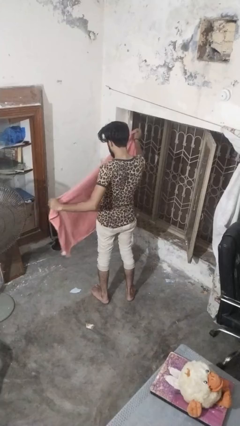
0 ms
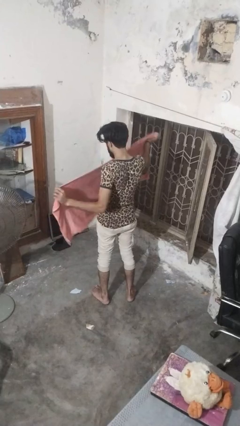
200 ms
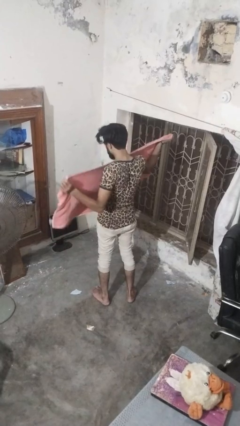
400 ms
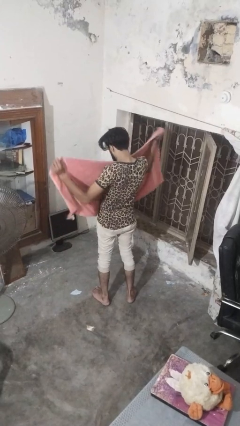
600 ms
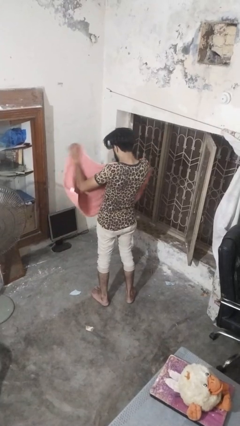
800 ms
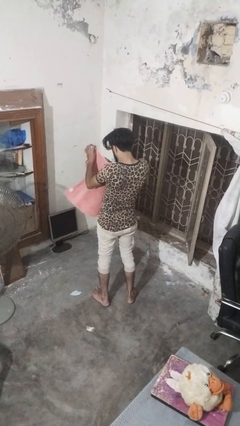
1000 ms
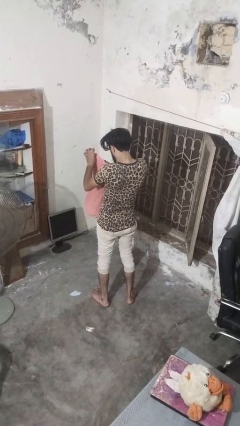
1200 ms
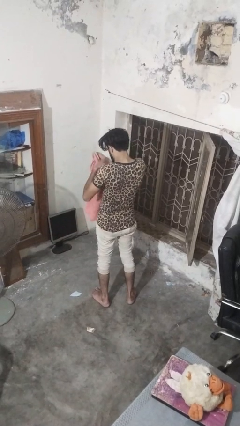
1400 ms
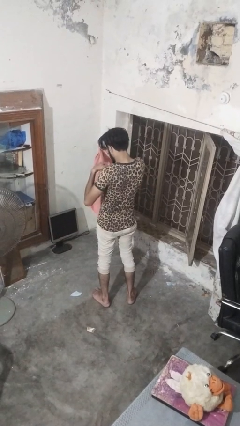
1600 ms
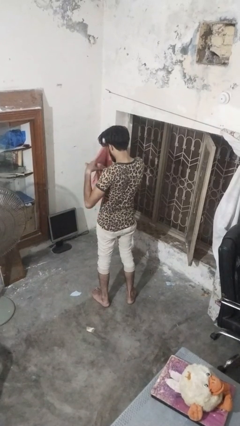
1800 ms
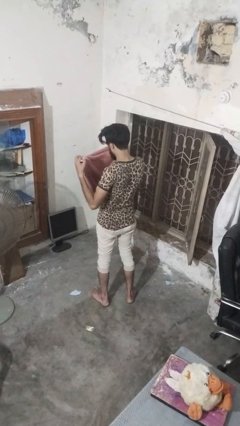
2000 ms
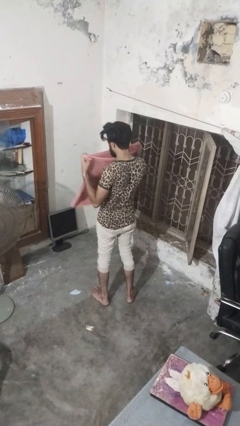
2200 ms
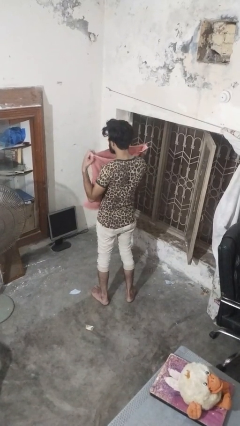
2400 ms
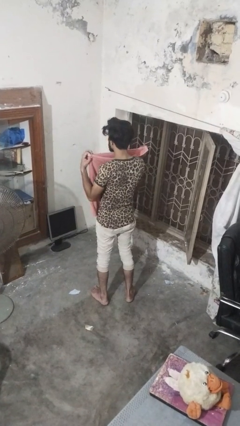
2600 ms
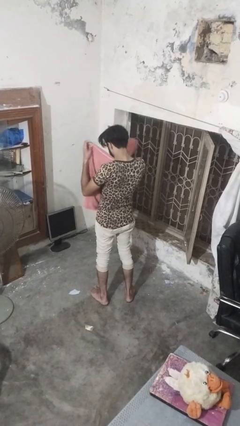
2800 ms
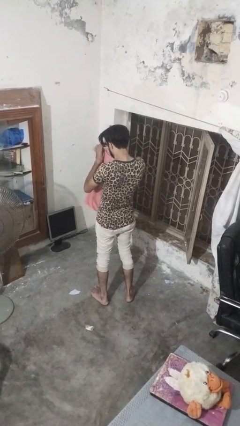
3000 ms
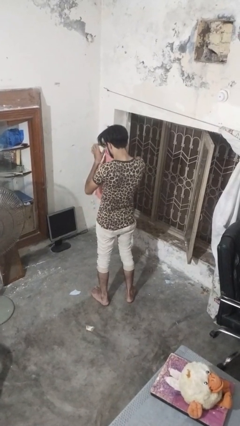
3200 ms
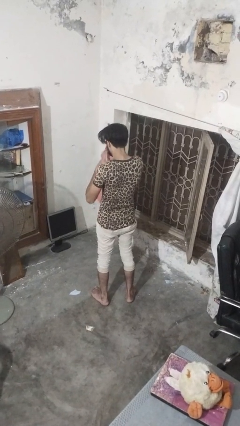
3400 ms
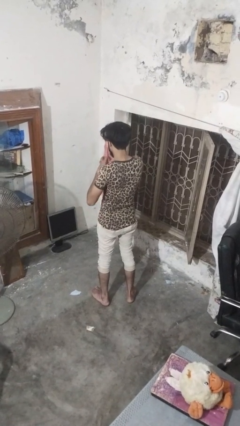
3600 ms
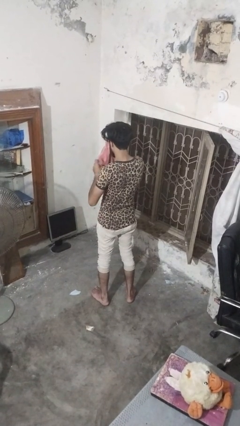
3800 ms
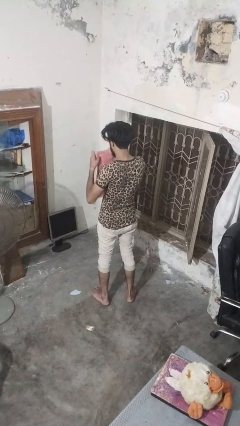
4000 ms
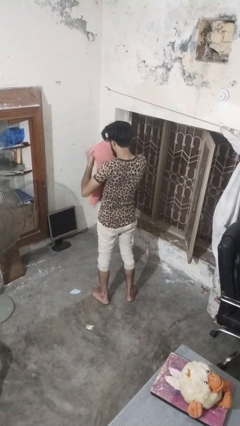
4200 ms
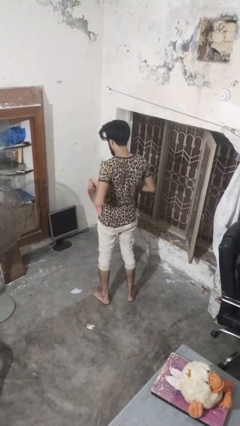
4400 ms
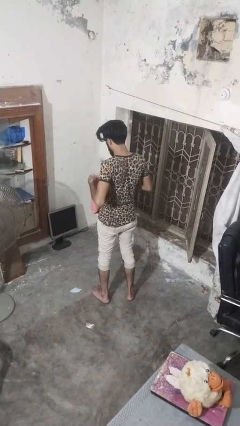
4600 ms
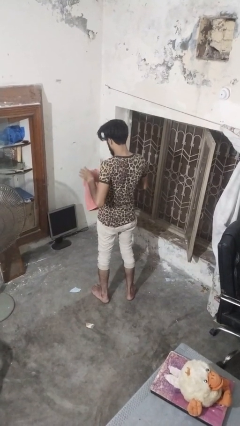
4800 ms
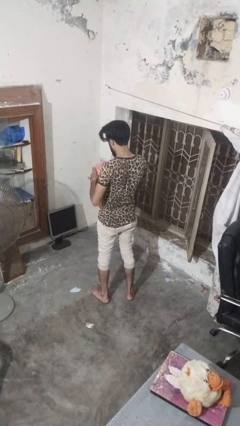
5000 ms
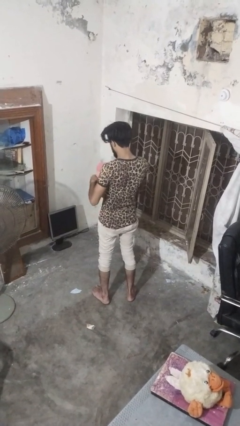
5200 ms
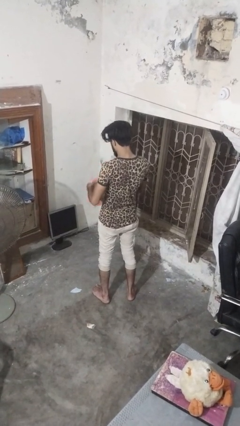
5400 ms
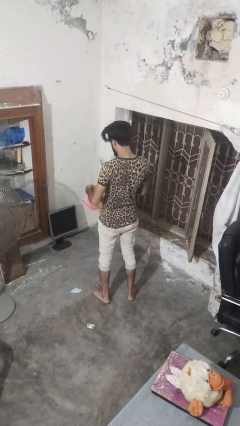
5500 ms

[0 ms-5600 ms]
person folds towel

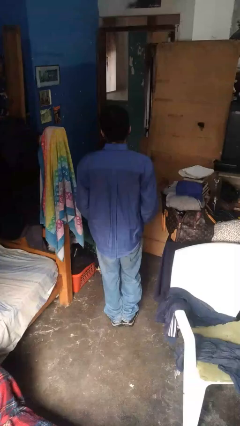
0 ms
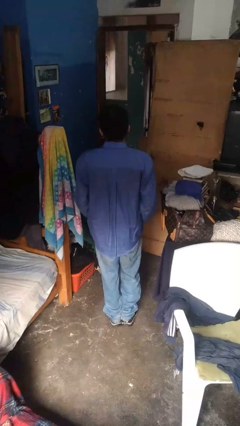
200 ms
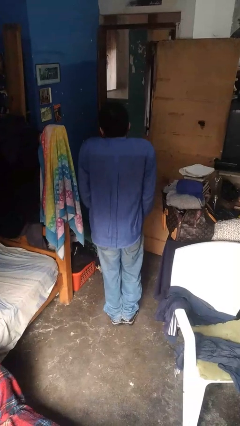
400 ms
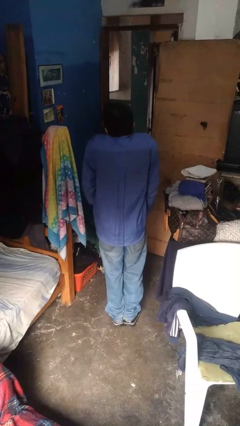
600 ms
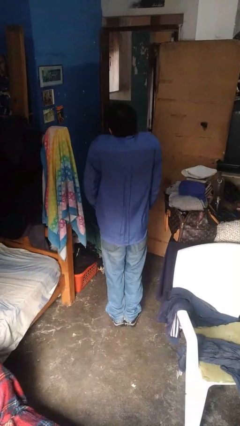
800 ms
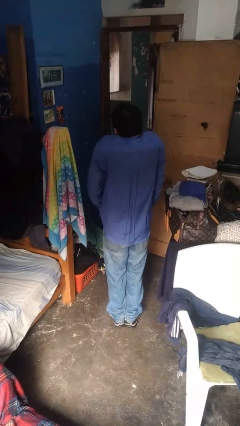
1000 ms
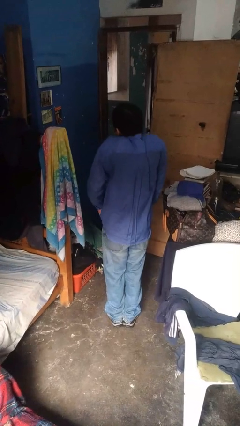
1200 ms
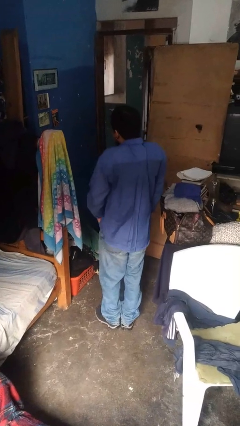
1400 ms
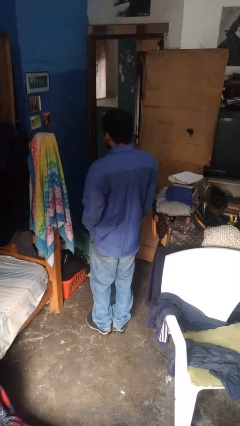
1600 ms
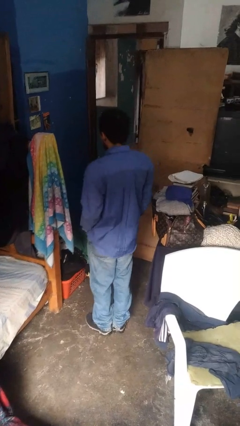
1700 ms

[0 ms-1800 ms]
person shrugs

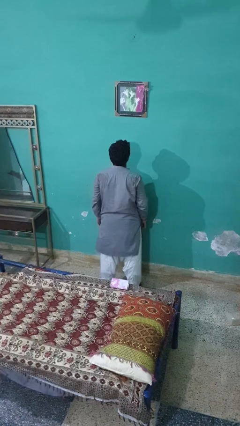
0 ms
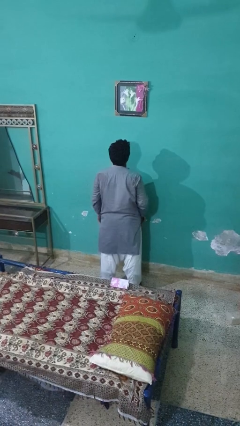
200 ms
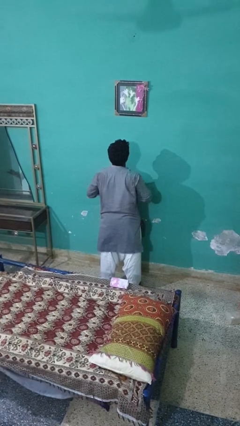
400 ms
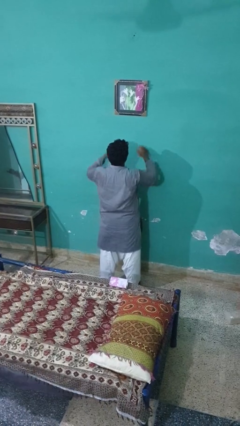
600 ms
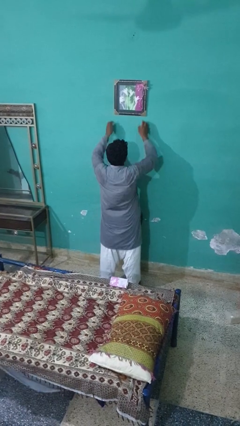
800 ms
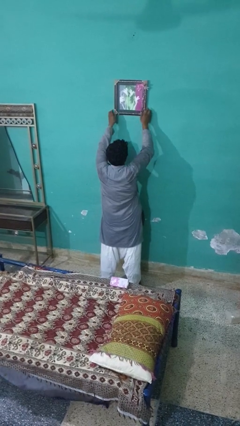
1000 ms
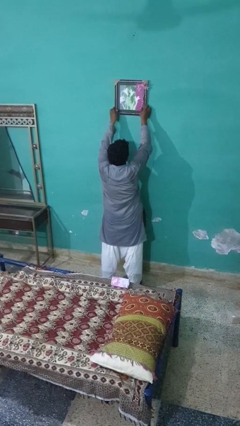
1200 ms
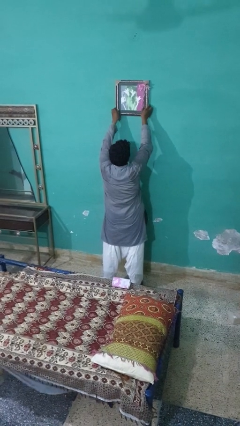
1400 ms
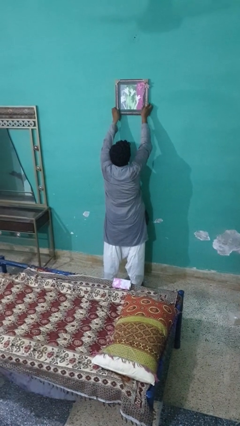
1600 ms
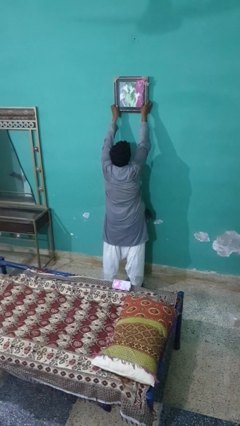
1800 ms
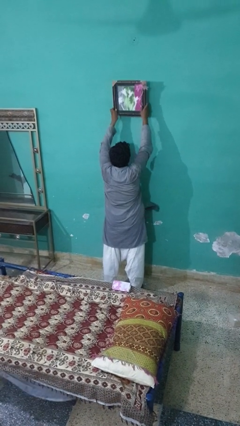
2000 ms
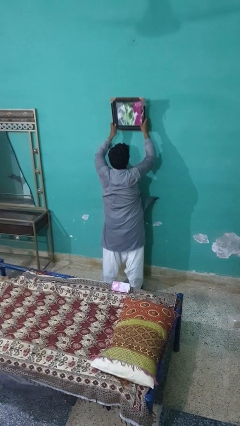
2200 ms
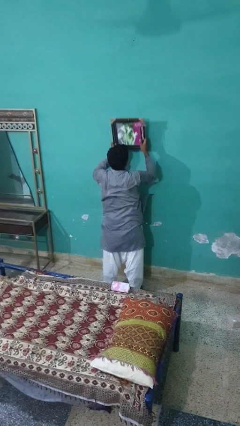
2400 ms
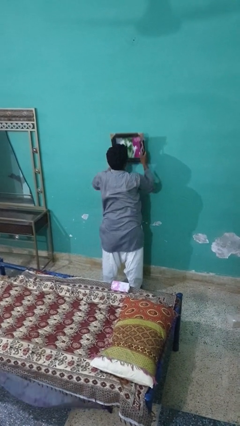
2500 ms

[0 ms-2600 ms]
person takes down picture frame

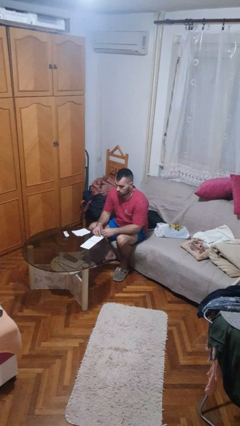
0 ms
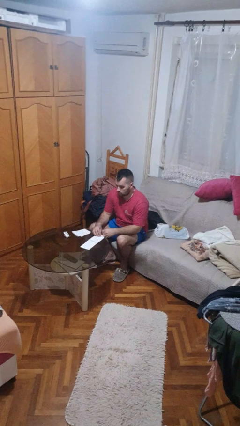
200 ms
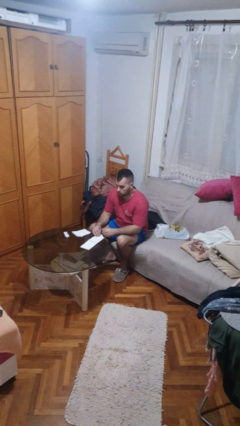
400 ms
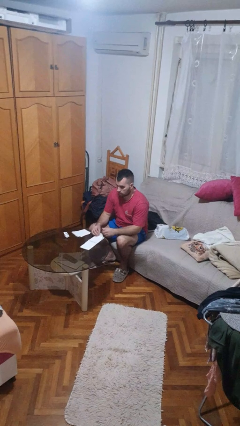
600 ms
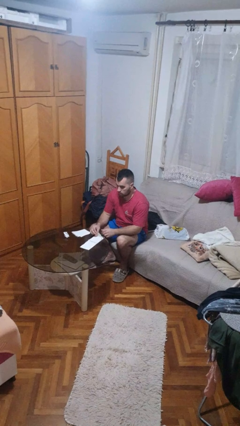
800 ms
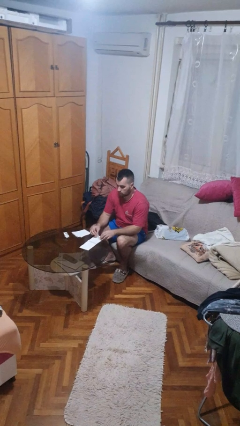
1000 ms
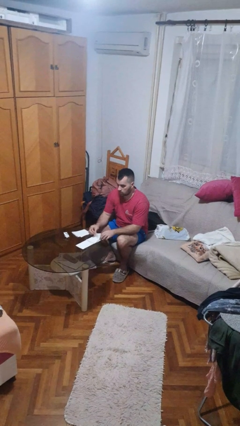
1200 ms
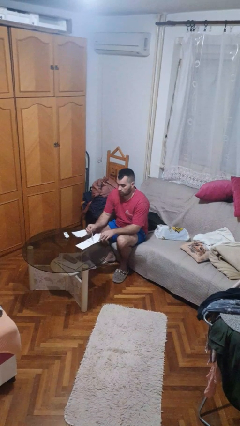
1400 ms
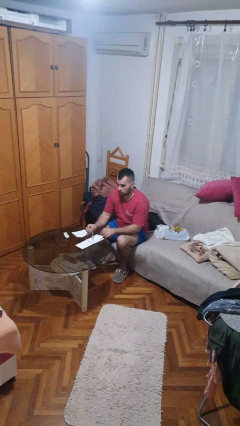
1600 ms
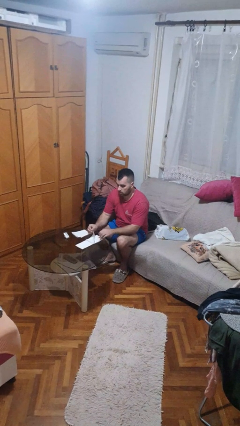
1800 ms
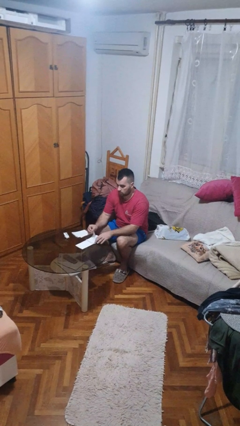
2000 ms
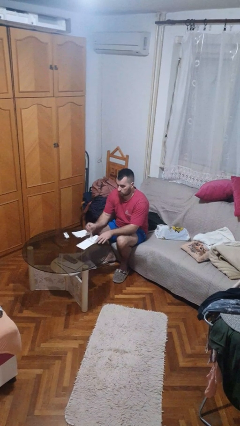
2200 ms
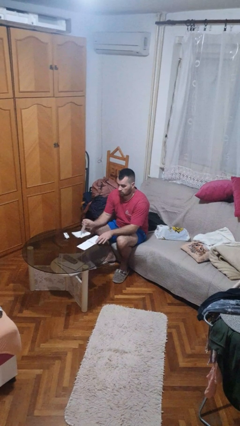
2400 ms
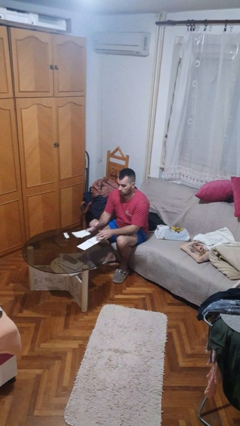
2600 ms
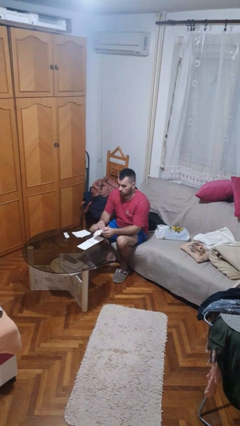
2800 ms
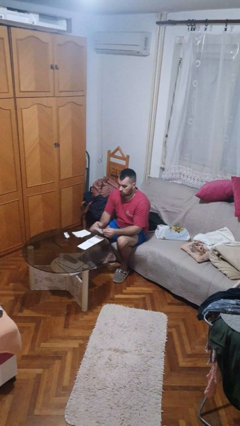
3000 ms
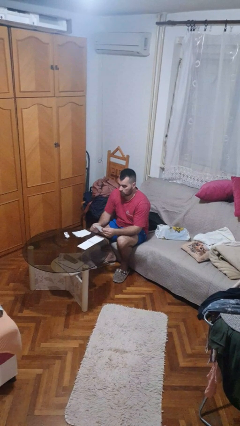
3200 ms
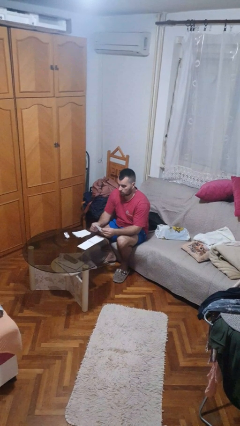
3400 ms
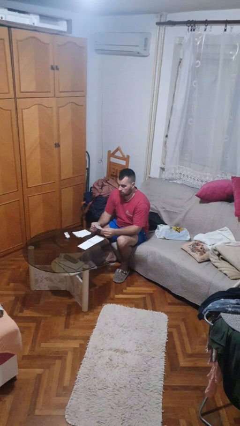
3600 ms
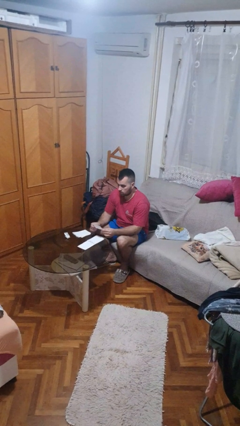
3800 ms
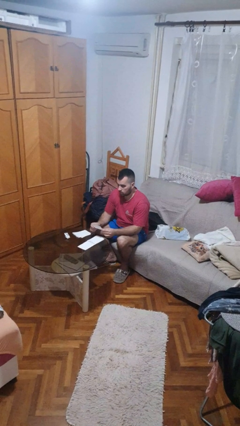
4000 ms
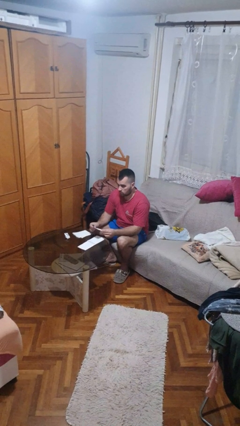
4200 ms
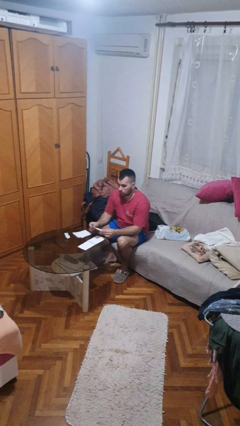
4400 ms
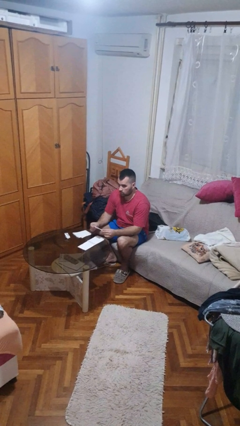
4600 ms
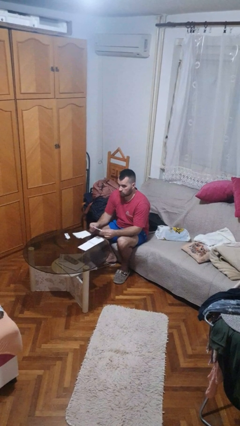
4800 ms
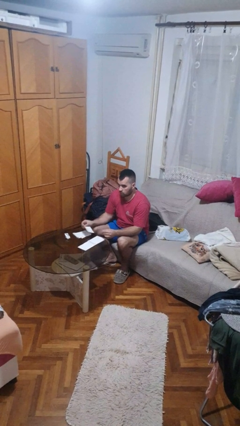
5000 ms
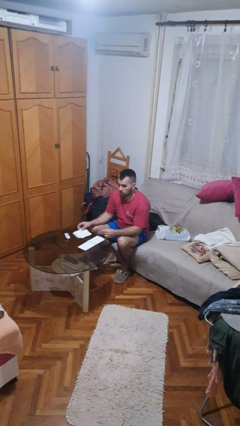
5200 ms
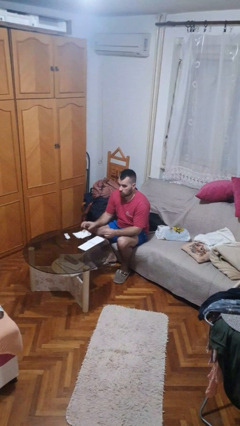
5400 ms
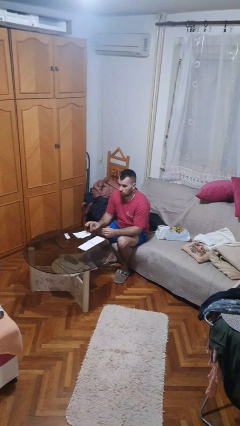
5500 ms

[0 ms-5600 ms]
person tears paper

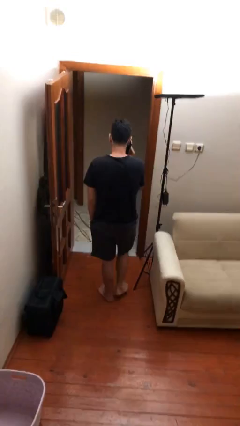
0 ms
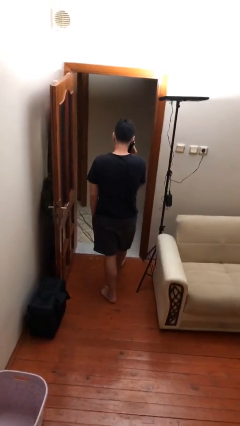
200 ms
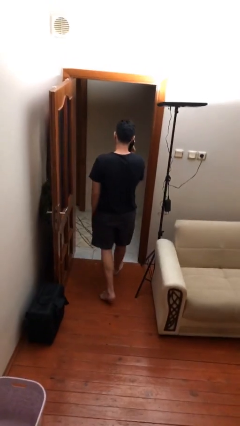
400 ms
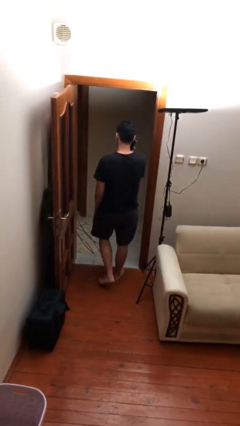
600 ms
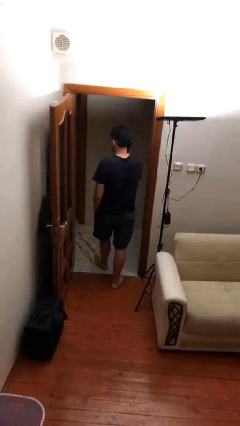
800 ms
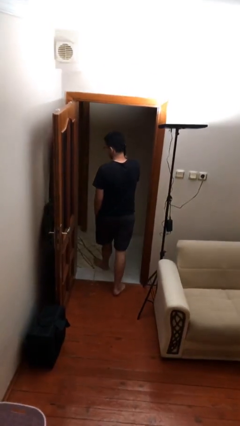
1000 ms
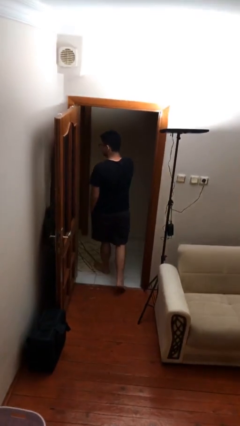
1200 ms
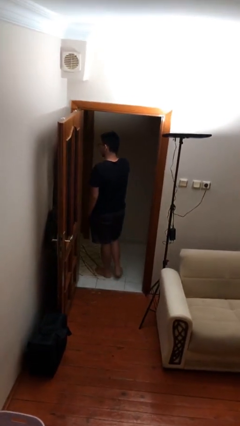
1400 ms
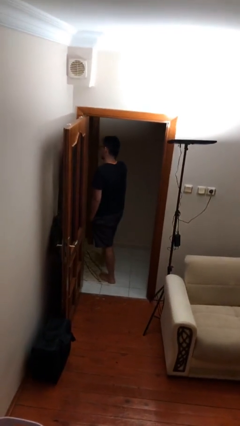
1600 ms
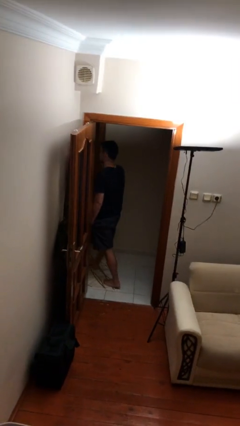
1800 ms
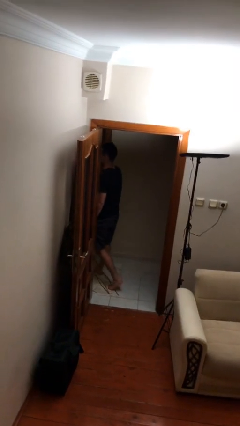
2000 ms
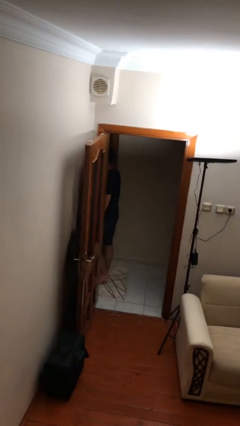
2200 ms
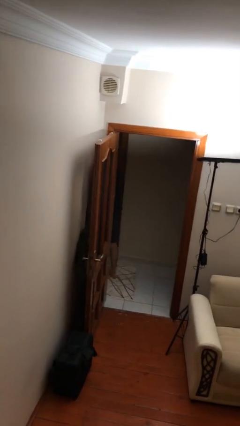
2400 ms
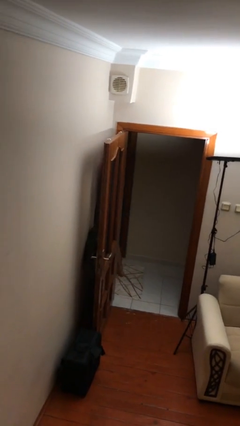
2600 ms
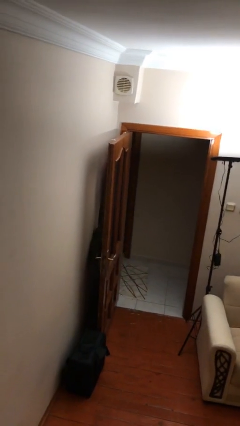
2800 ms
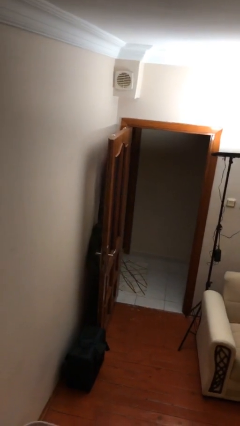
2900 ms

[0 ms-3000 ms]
person exits scene through structure
